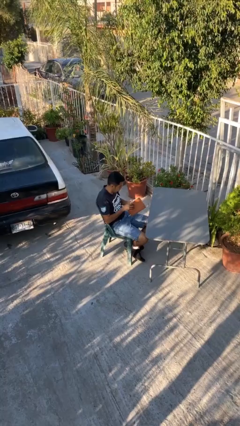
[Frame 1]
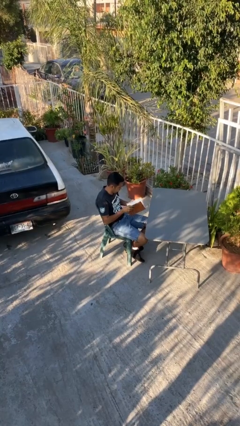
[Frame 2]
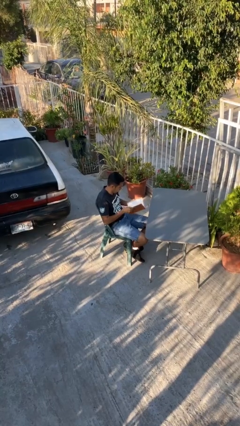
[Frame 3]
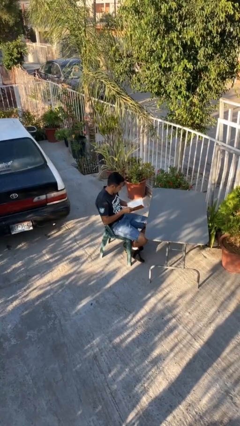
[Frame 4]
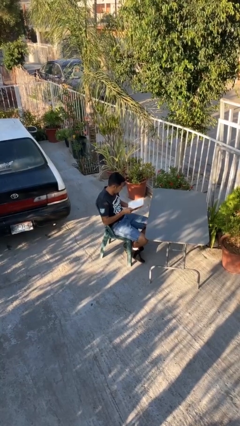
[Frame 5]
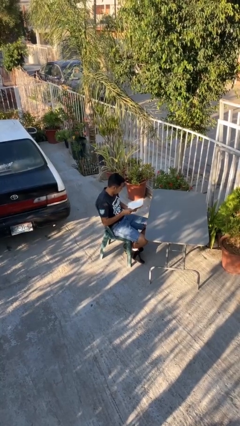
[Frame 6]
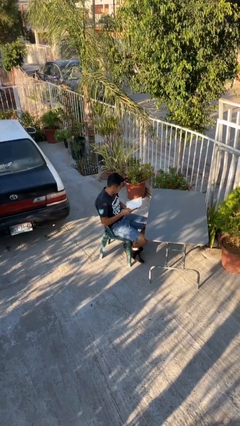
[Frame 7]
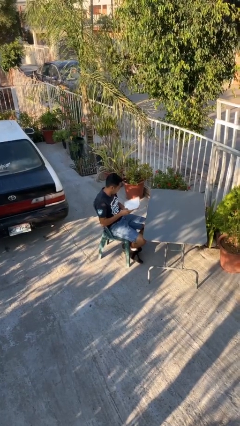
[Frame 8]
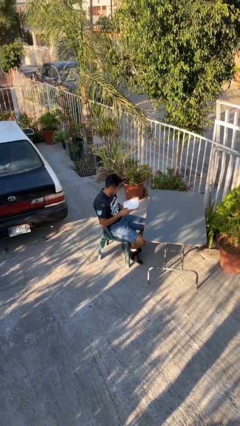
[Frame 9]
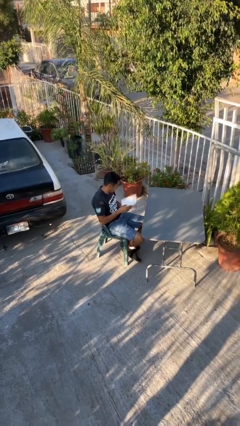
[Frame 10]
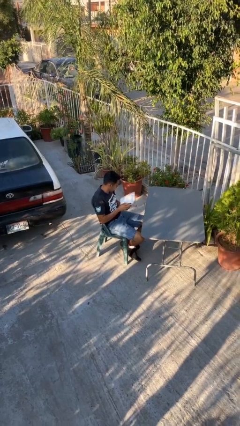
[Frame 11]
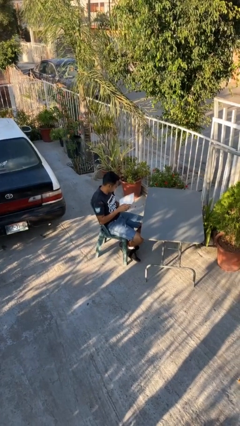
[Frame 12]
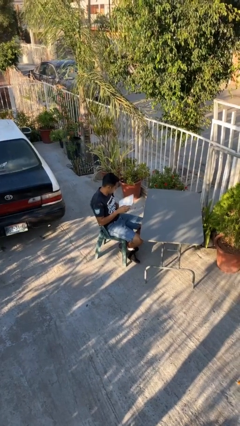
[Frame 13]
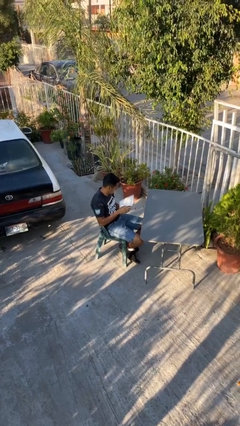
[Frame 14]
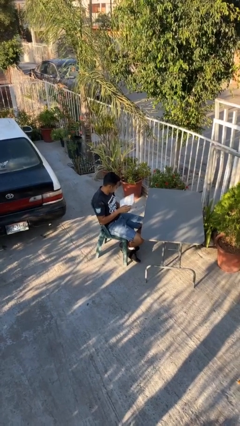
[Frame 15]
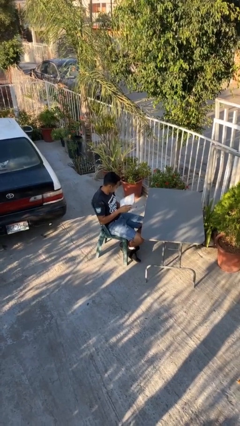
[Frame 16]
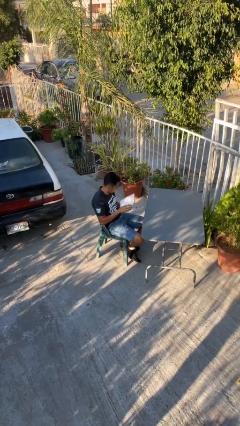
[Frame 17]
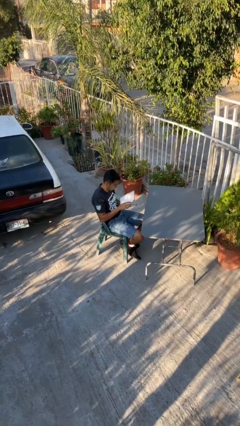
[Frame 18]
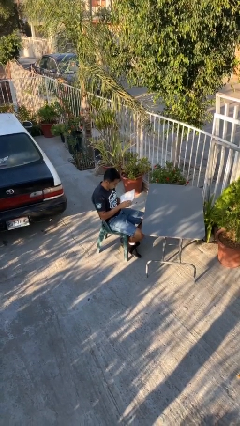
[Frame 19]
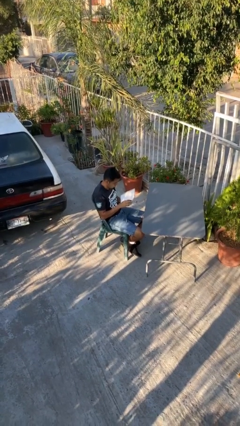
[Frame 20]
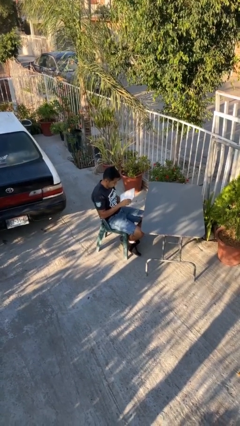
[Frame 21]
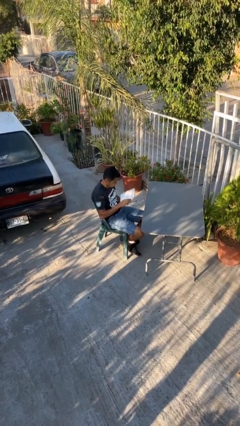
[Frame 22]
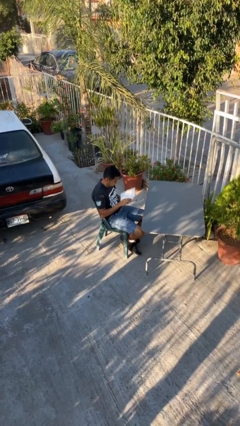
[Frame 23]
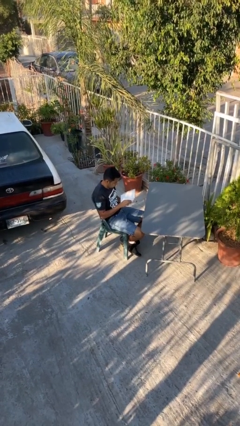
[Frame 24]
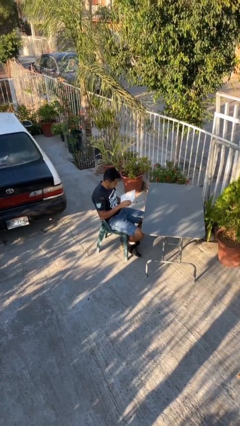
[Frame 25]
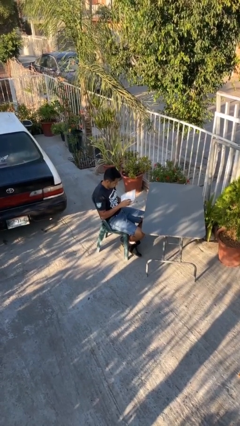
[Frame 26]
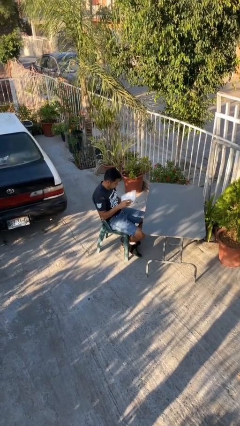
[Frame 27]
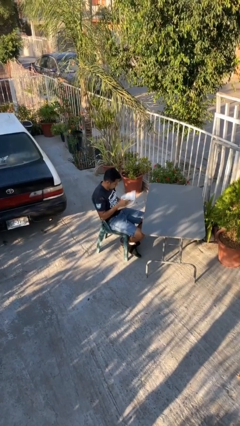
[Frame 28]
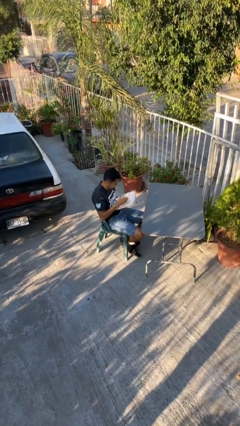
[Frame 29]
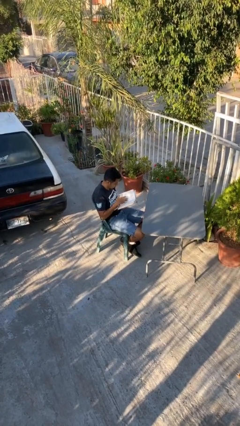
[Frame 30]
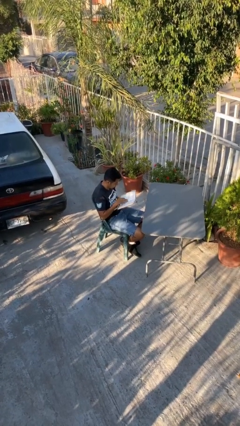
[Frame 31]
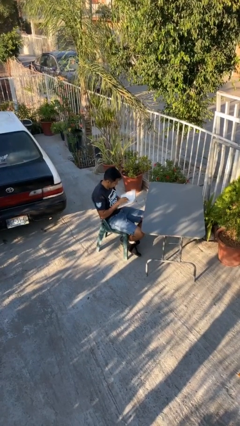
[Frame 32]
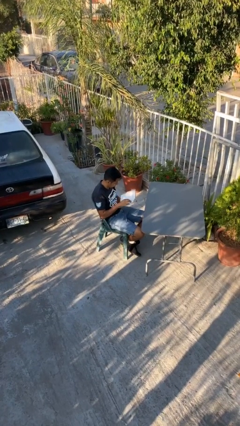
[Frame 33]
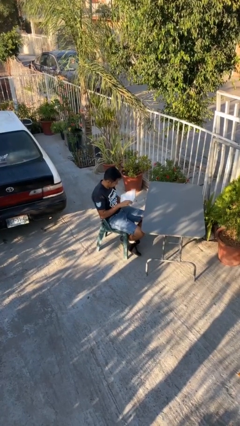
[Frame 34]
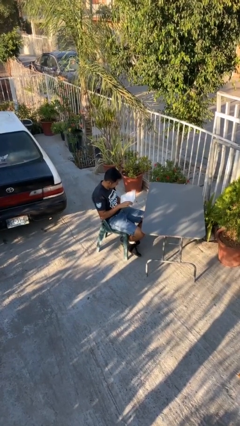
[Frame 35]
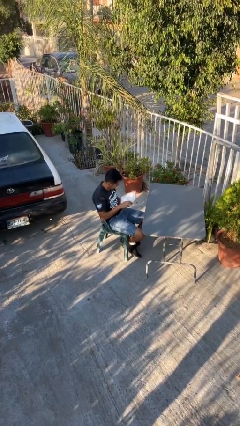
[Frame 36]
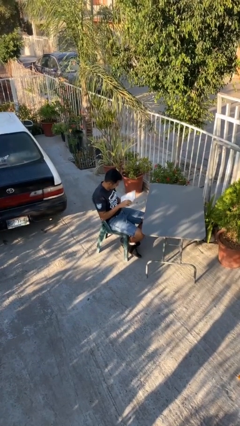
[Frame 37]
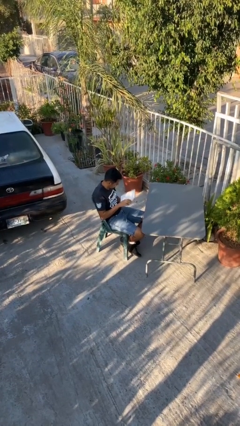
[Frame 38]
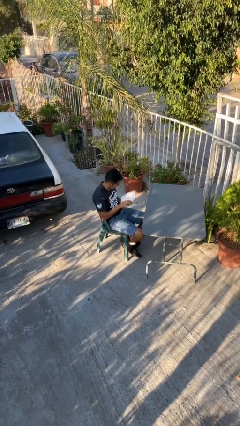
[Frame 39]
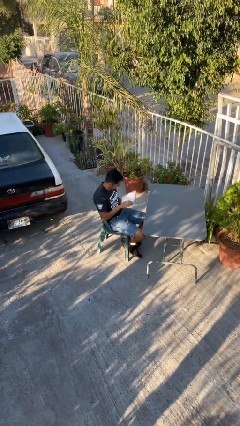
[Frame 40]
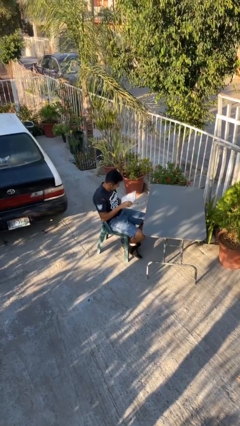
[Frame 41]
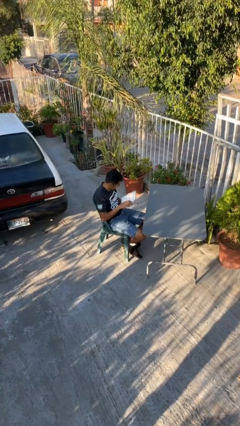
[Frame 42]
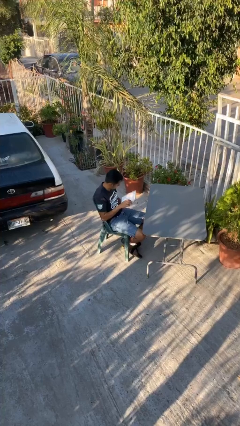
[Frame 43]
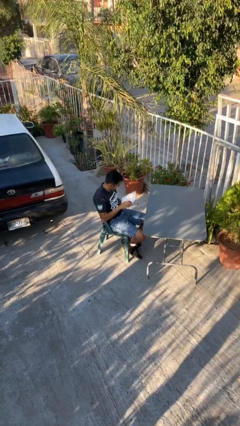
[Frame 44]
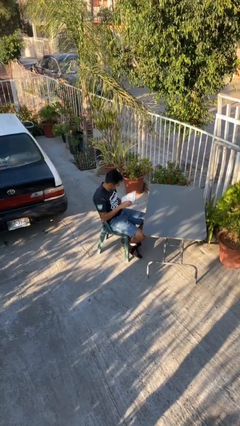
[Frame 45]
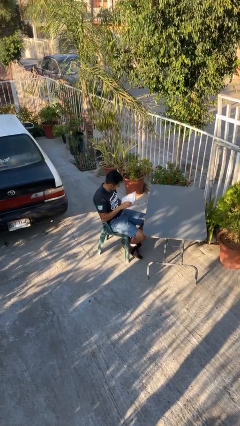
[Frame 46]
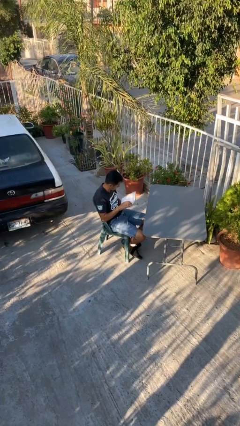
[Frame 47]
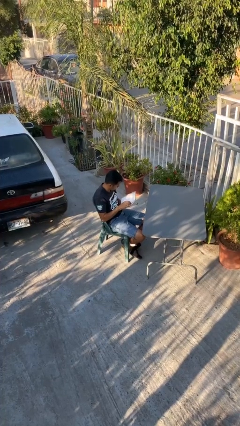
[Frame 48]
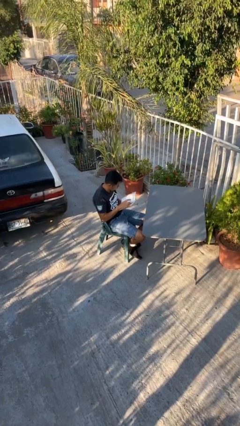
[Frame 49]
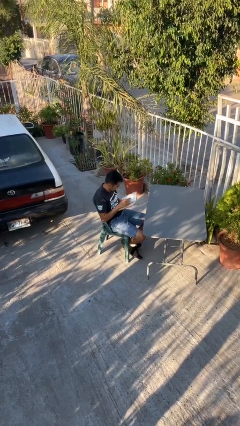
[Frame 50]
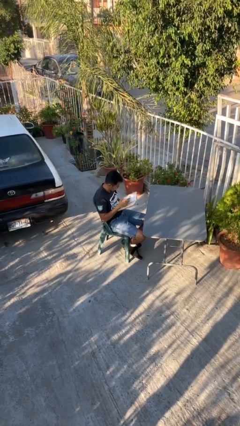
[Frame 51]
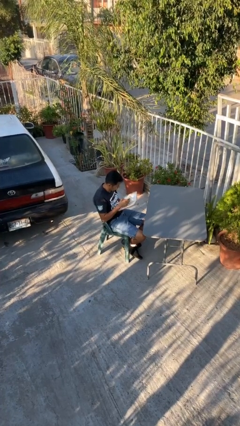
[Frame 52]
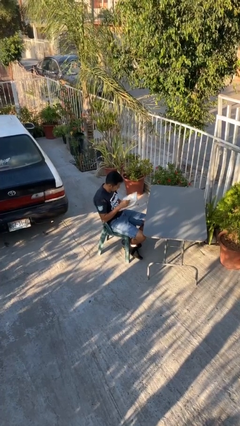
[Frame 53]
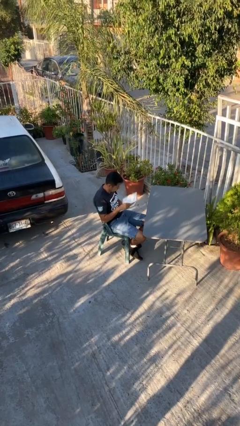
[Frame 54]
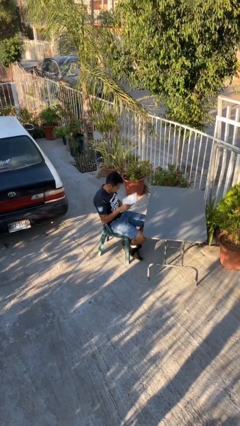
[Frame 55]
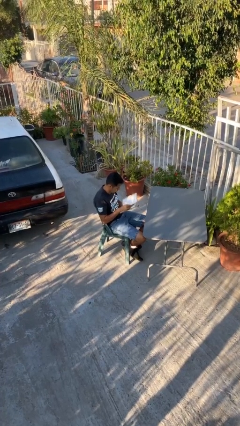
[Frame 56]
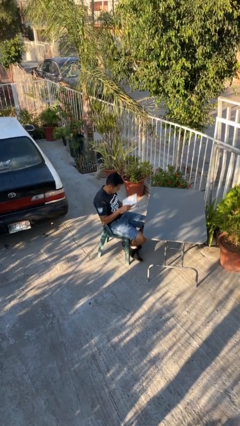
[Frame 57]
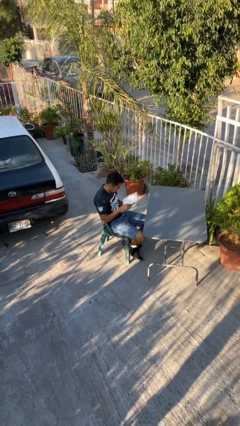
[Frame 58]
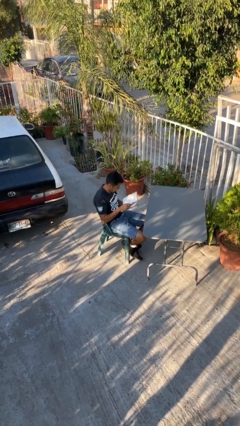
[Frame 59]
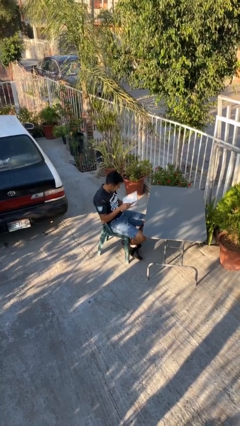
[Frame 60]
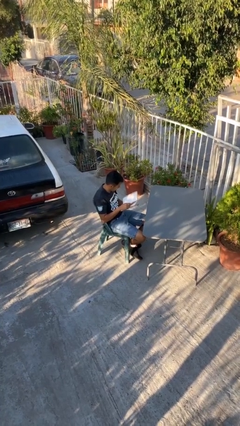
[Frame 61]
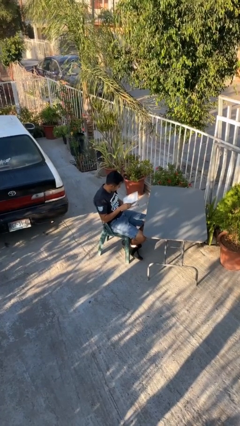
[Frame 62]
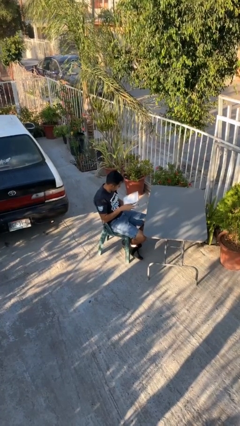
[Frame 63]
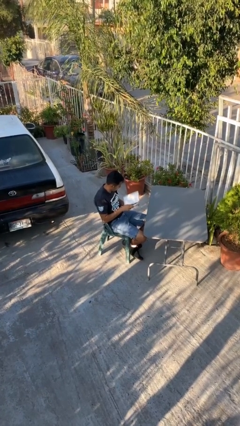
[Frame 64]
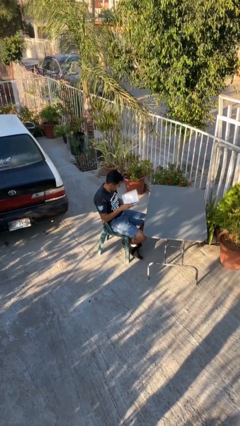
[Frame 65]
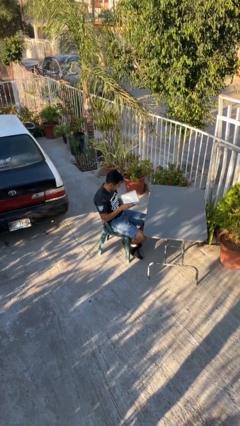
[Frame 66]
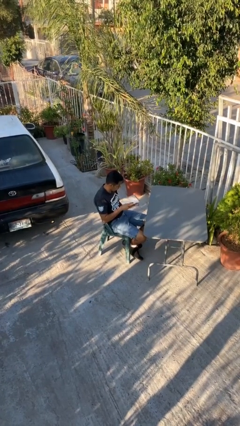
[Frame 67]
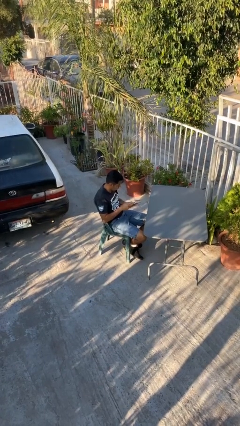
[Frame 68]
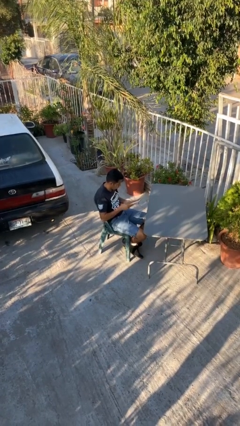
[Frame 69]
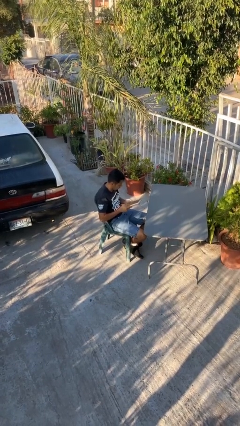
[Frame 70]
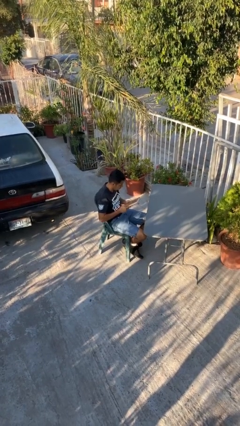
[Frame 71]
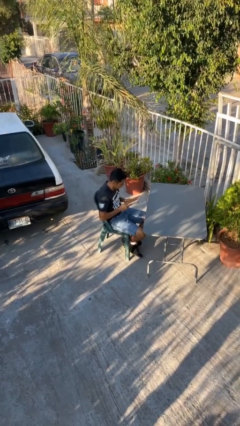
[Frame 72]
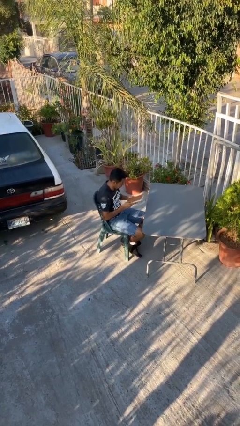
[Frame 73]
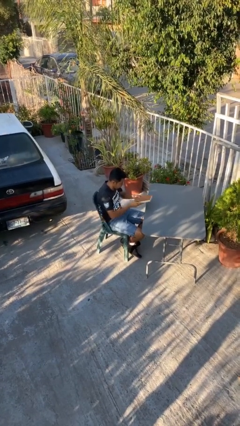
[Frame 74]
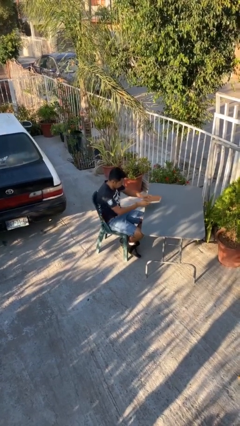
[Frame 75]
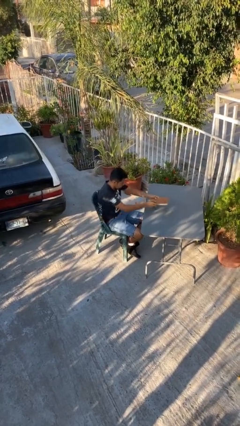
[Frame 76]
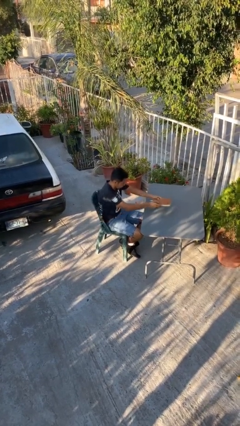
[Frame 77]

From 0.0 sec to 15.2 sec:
person reads document

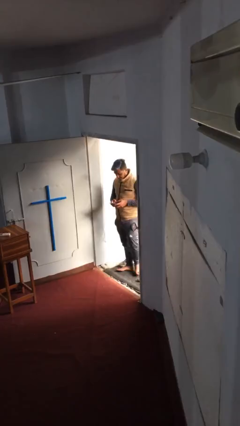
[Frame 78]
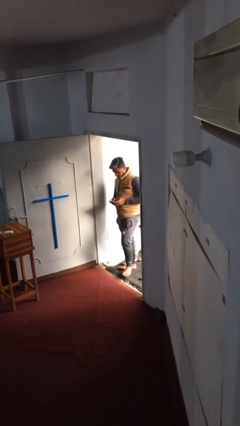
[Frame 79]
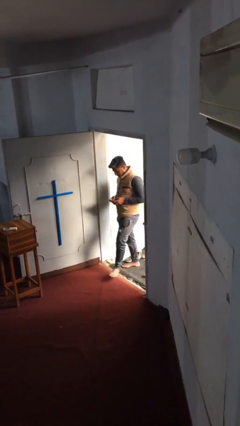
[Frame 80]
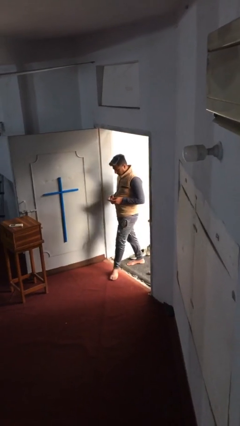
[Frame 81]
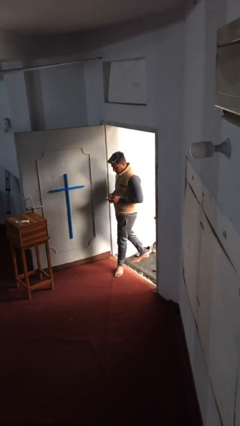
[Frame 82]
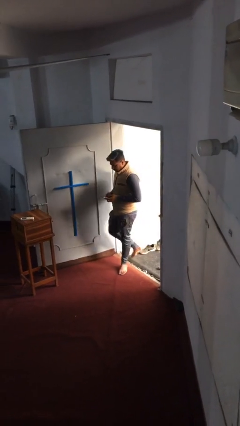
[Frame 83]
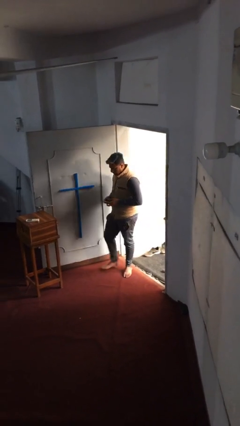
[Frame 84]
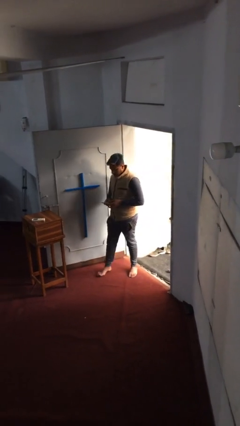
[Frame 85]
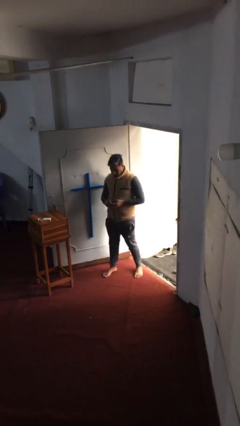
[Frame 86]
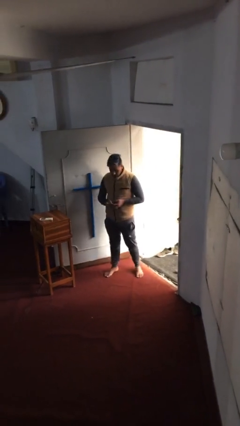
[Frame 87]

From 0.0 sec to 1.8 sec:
person enters scene through structure

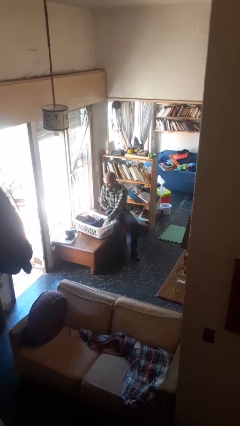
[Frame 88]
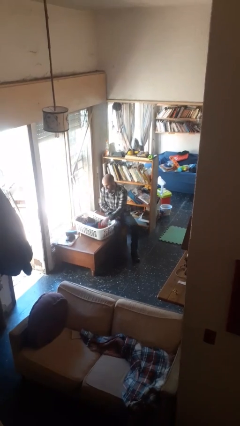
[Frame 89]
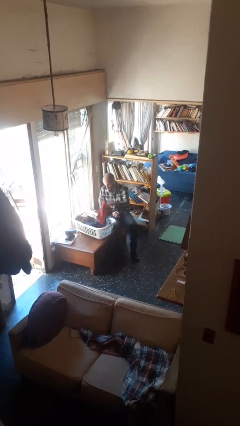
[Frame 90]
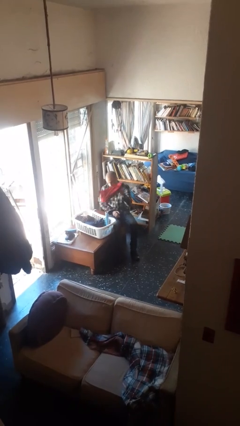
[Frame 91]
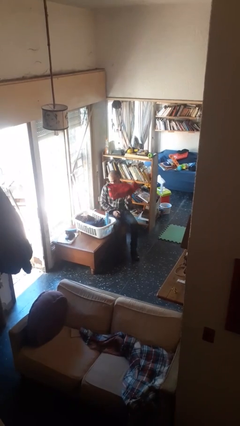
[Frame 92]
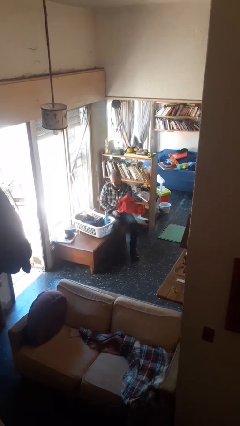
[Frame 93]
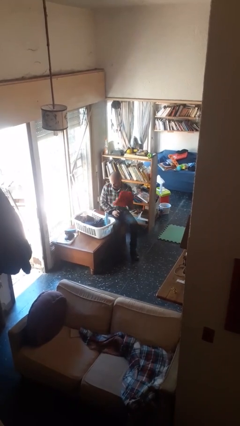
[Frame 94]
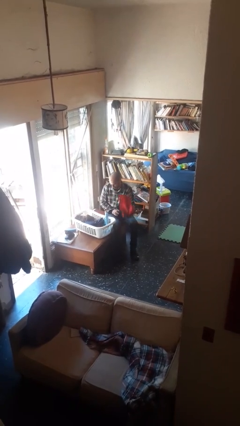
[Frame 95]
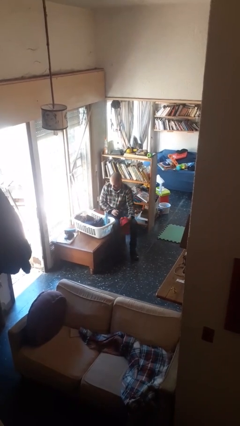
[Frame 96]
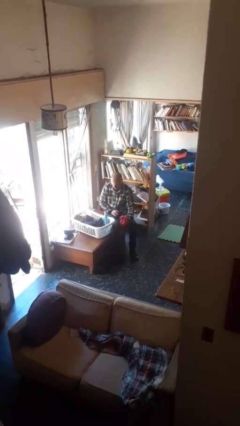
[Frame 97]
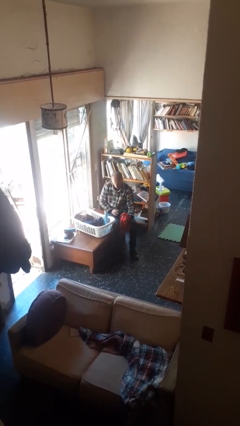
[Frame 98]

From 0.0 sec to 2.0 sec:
person takes object from basket
